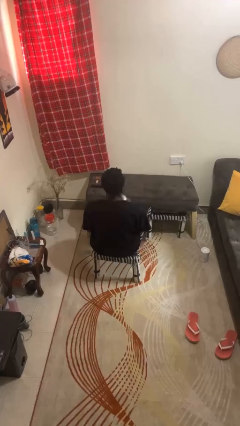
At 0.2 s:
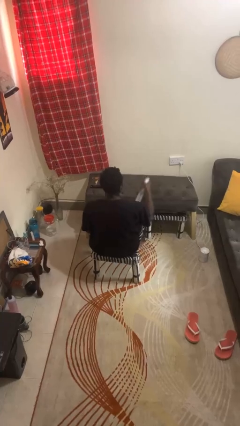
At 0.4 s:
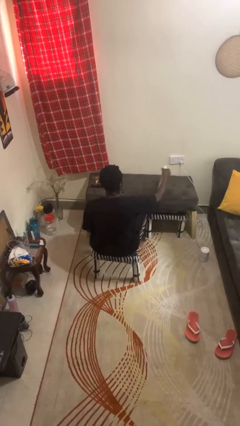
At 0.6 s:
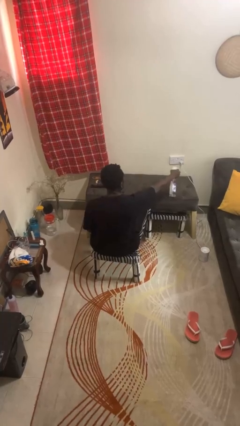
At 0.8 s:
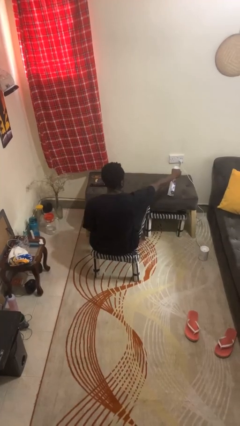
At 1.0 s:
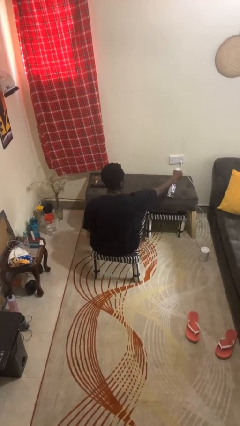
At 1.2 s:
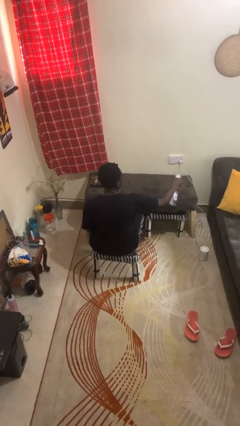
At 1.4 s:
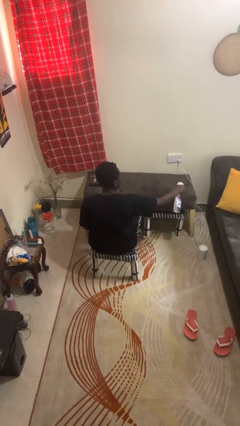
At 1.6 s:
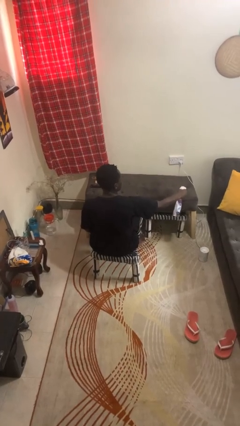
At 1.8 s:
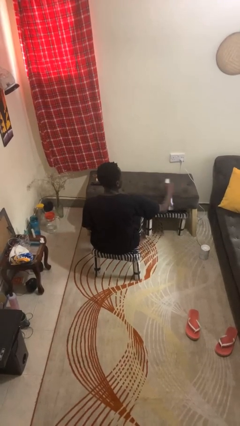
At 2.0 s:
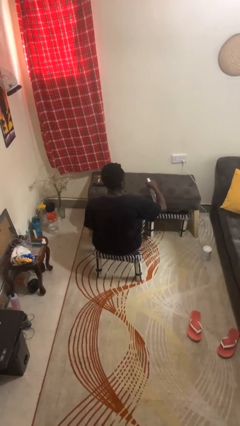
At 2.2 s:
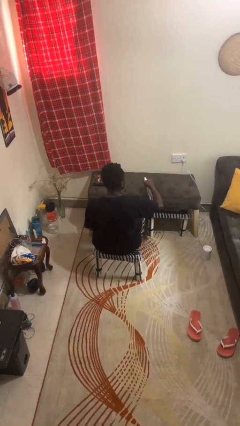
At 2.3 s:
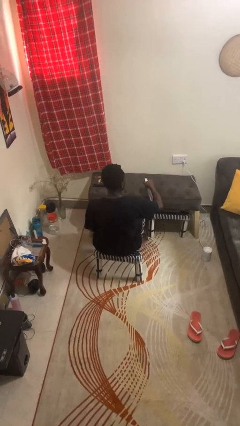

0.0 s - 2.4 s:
person sprays from bottle

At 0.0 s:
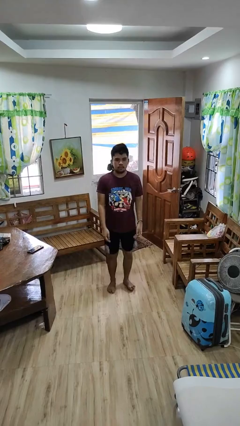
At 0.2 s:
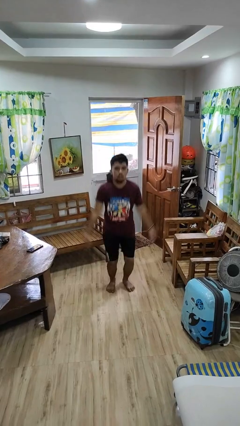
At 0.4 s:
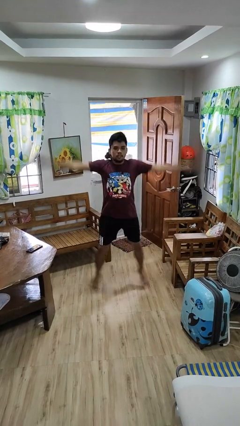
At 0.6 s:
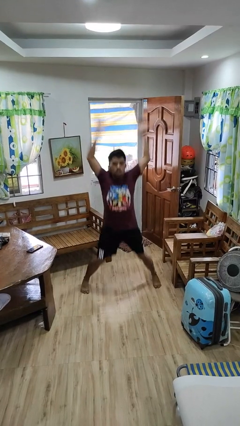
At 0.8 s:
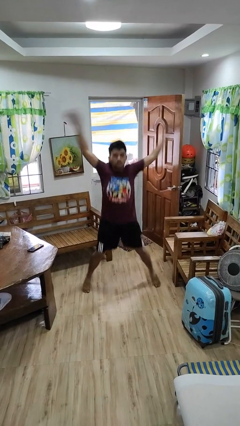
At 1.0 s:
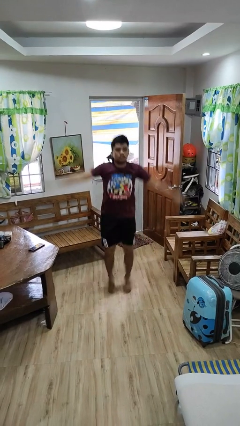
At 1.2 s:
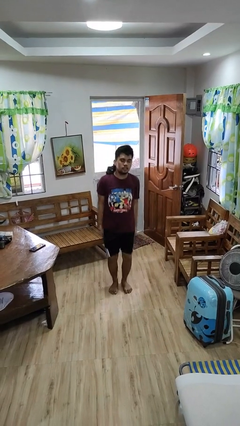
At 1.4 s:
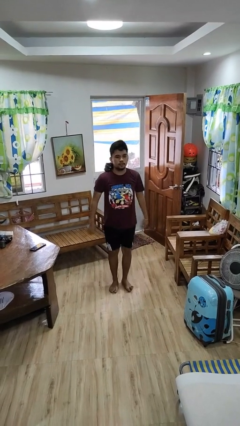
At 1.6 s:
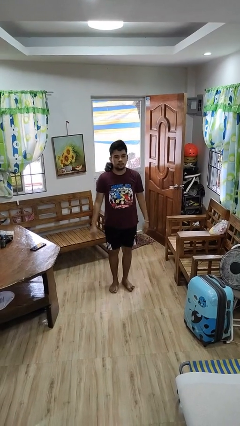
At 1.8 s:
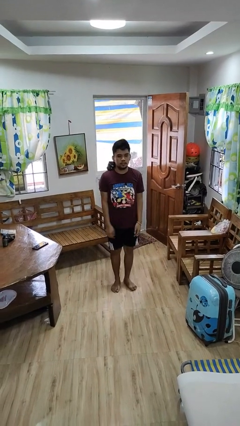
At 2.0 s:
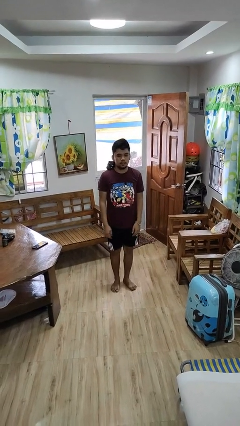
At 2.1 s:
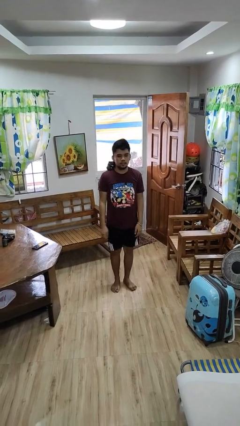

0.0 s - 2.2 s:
person exercises with jumping jacks

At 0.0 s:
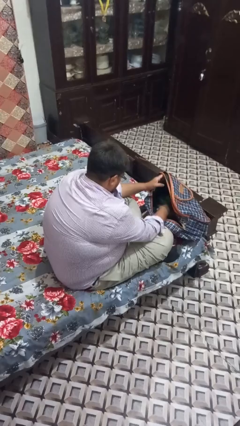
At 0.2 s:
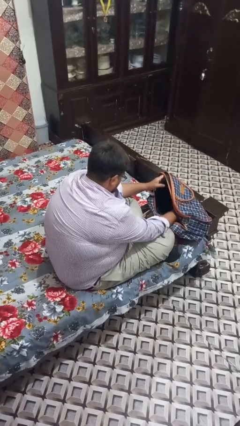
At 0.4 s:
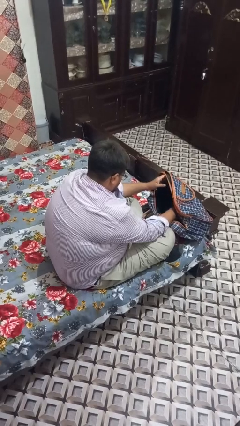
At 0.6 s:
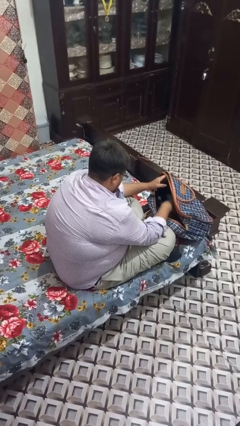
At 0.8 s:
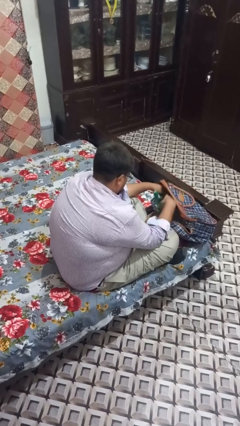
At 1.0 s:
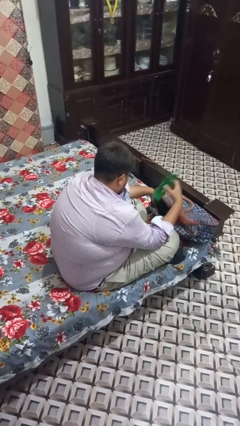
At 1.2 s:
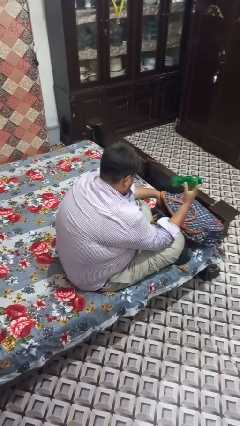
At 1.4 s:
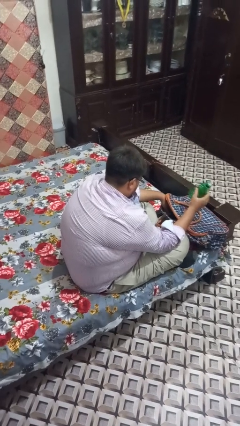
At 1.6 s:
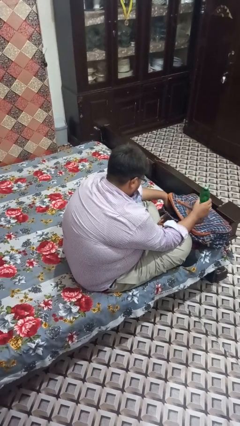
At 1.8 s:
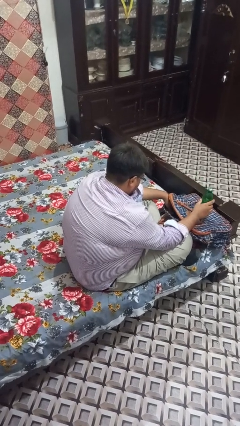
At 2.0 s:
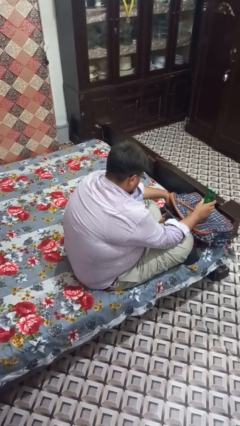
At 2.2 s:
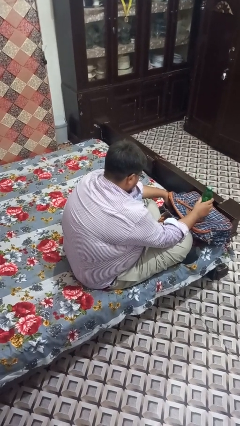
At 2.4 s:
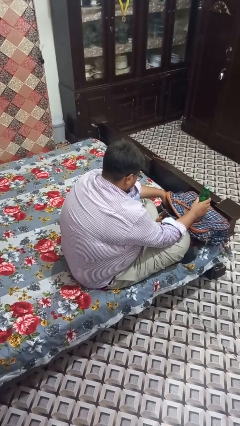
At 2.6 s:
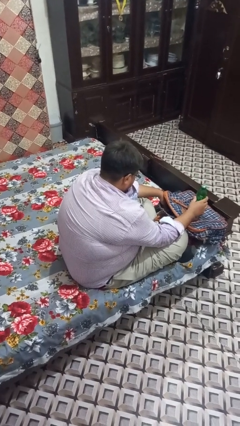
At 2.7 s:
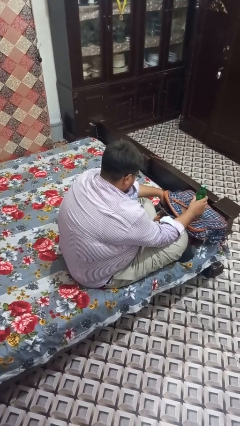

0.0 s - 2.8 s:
person takes object from backpack

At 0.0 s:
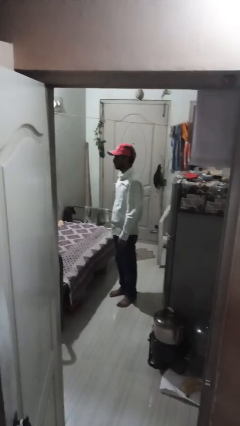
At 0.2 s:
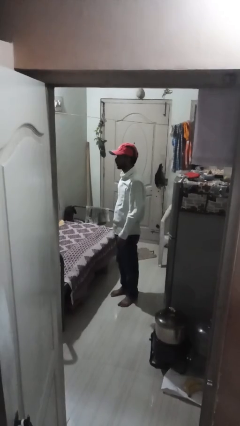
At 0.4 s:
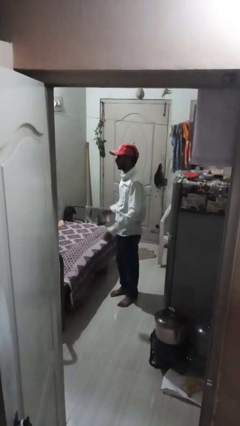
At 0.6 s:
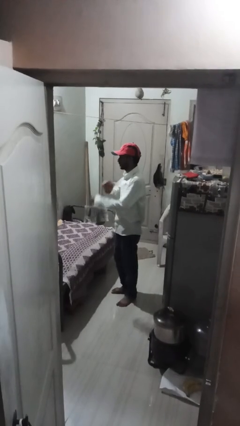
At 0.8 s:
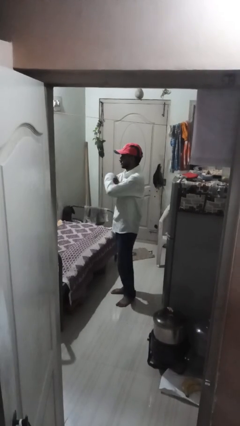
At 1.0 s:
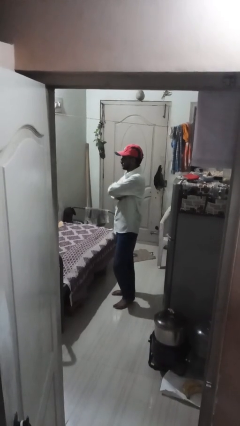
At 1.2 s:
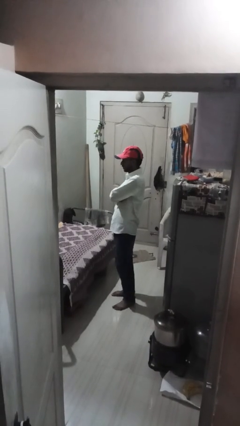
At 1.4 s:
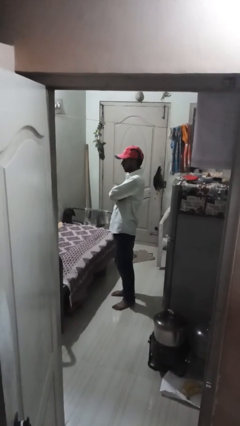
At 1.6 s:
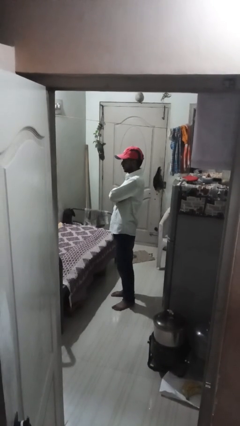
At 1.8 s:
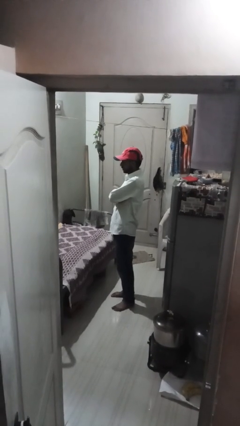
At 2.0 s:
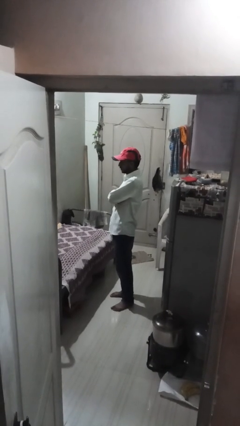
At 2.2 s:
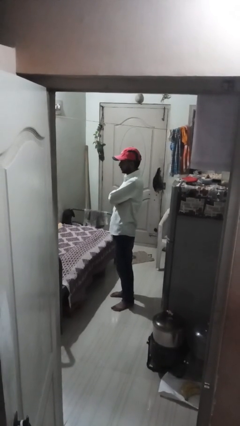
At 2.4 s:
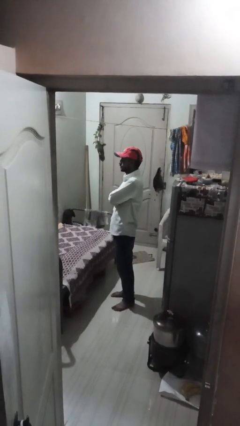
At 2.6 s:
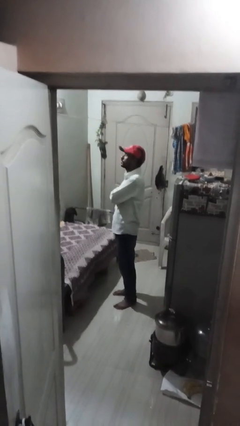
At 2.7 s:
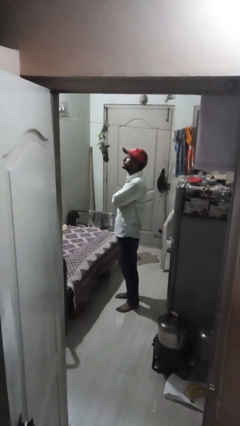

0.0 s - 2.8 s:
person crosses arms

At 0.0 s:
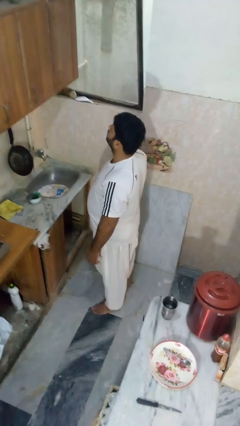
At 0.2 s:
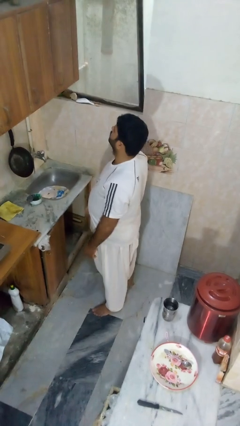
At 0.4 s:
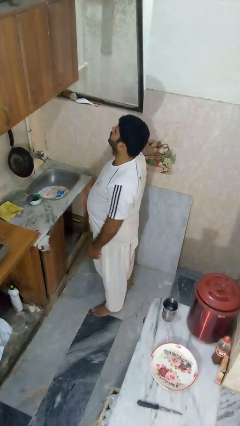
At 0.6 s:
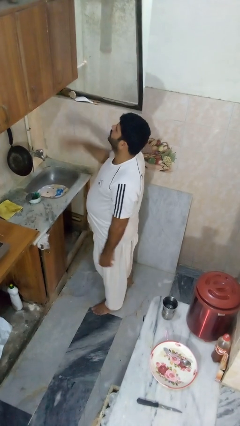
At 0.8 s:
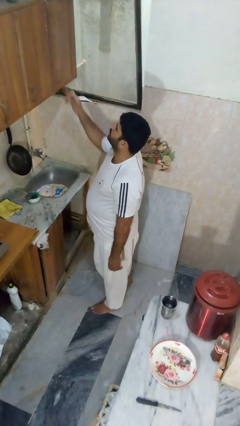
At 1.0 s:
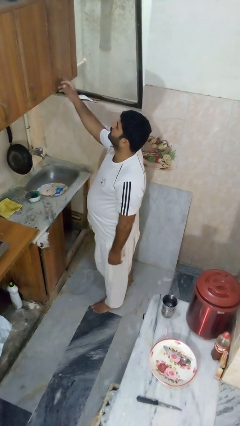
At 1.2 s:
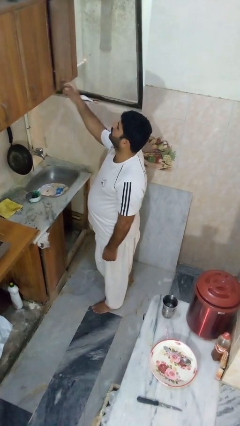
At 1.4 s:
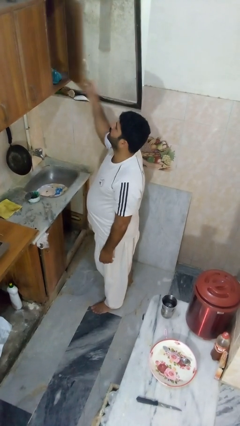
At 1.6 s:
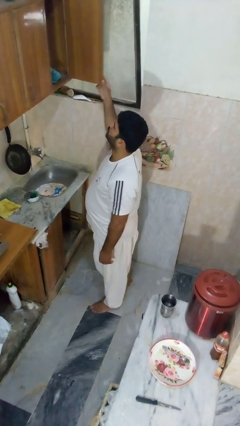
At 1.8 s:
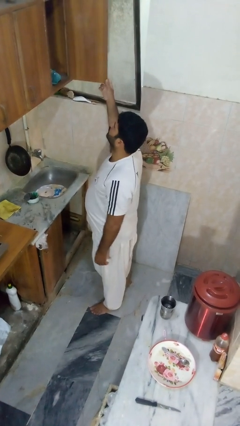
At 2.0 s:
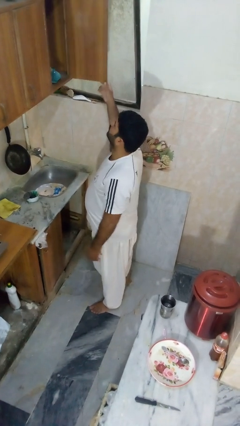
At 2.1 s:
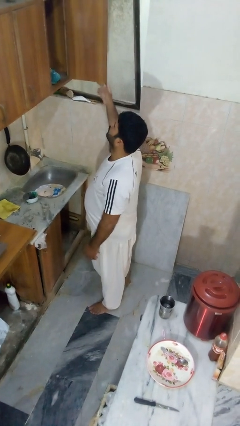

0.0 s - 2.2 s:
person opens cabinet

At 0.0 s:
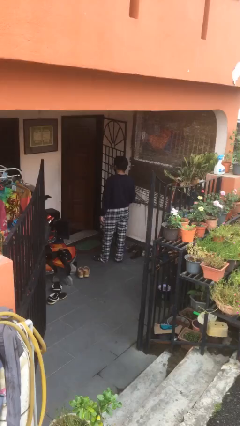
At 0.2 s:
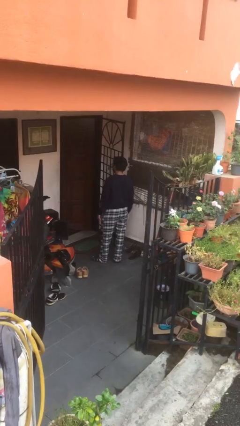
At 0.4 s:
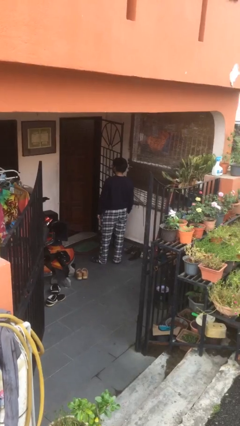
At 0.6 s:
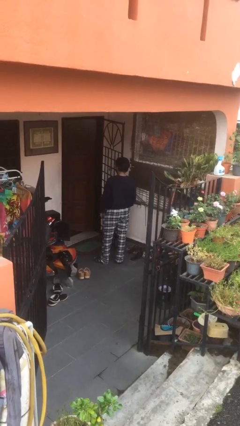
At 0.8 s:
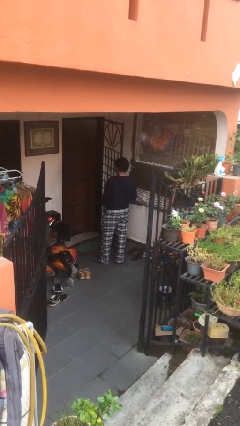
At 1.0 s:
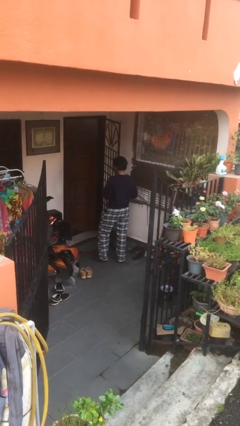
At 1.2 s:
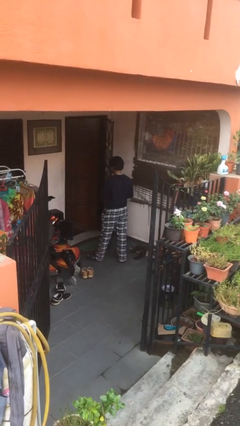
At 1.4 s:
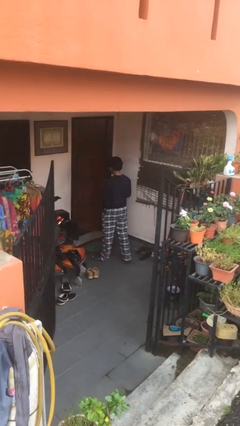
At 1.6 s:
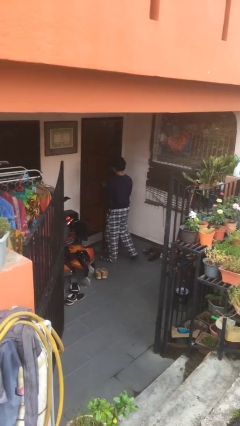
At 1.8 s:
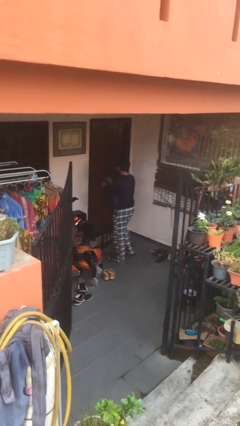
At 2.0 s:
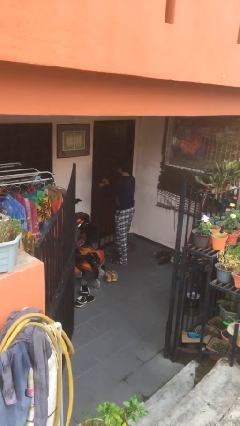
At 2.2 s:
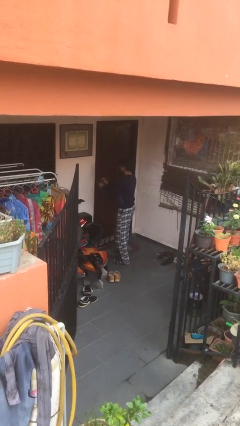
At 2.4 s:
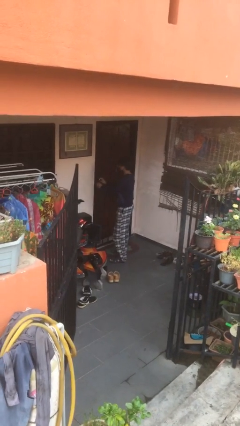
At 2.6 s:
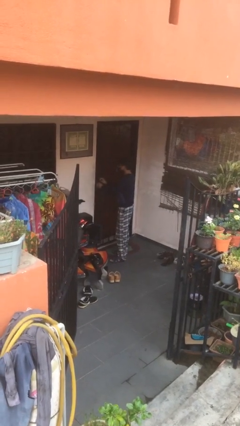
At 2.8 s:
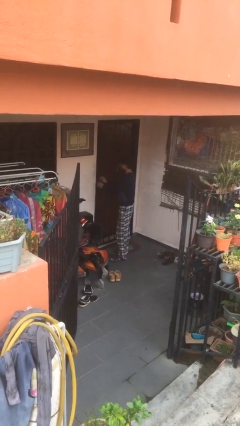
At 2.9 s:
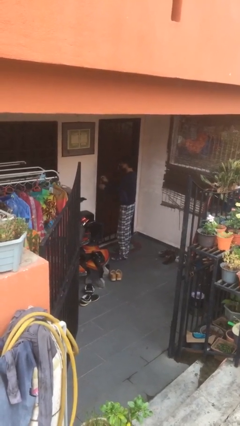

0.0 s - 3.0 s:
person closes facility door

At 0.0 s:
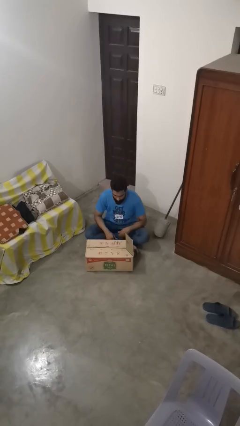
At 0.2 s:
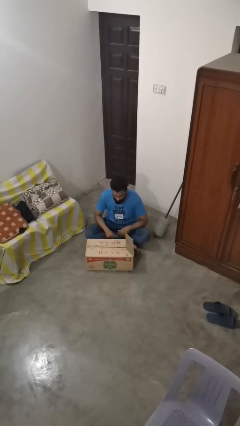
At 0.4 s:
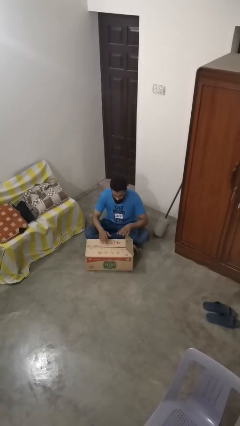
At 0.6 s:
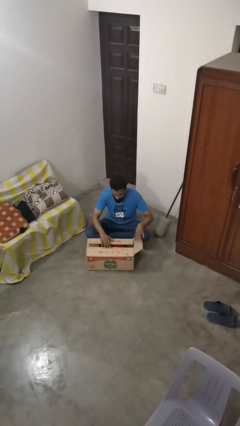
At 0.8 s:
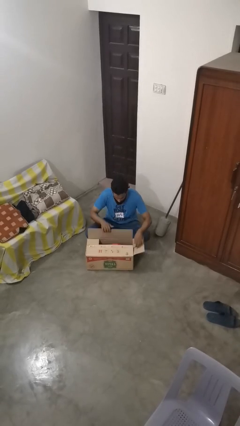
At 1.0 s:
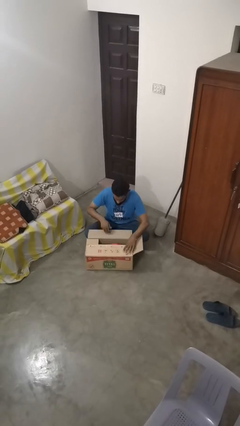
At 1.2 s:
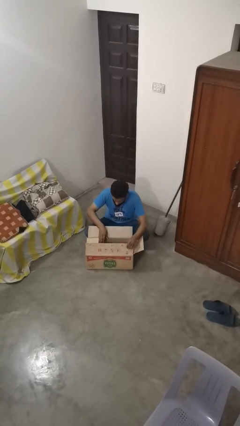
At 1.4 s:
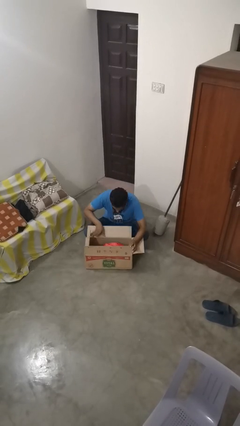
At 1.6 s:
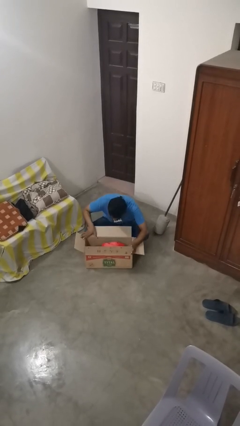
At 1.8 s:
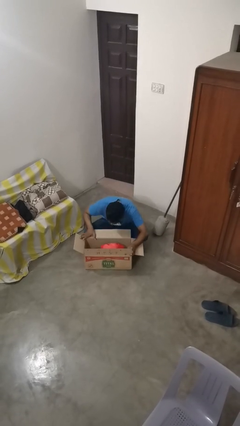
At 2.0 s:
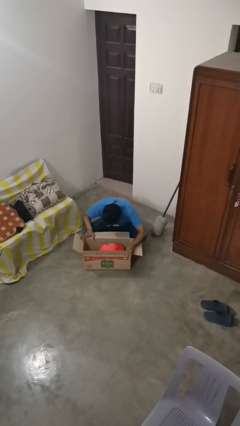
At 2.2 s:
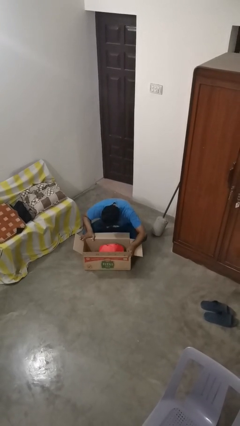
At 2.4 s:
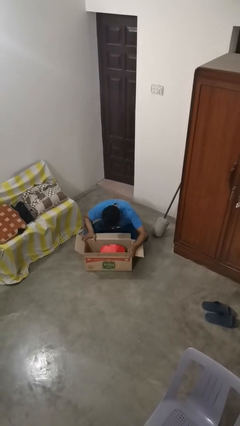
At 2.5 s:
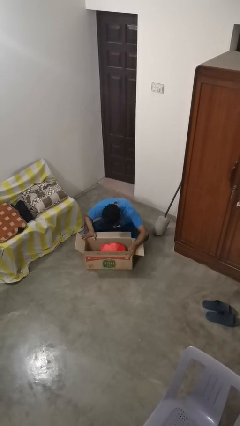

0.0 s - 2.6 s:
person searches in box
